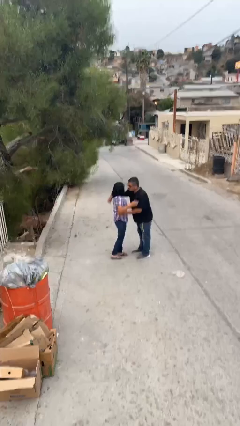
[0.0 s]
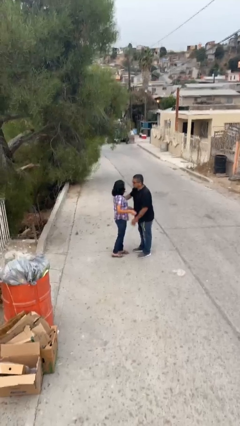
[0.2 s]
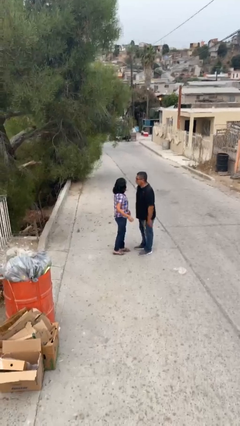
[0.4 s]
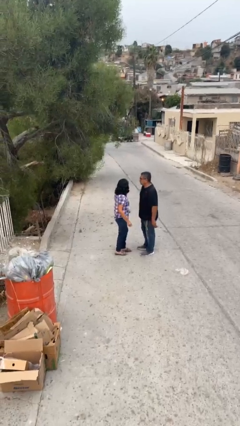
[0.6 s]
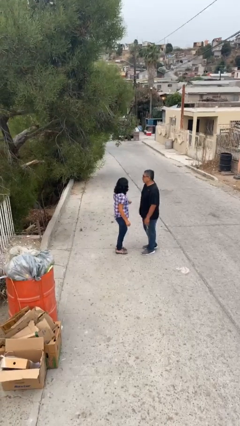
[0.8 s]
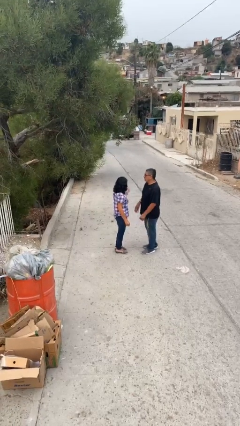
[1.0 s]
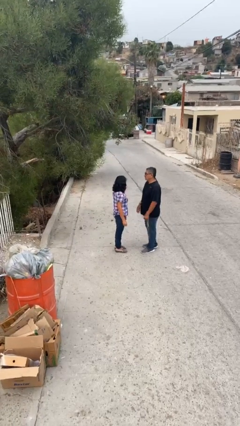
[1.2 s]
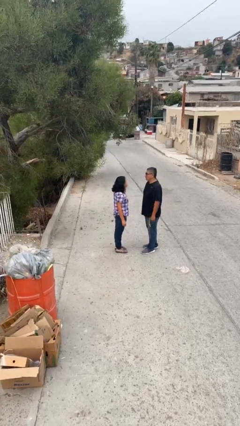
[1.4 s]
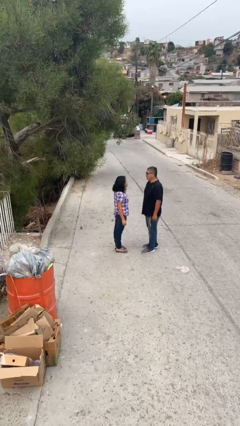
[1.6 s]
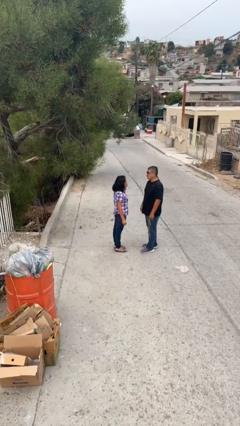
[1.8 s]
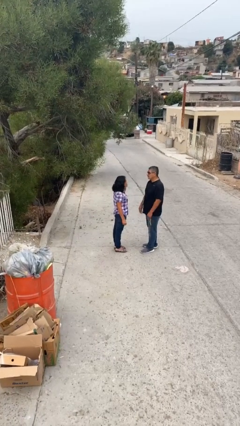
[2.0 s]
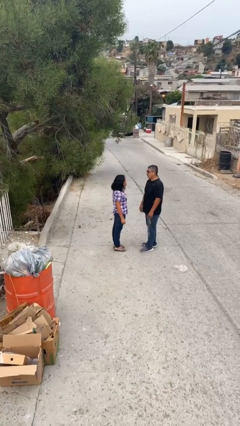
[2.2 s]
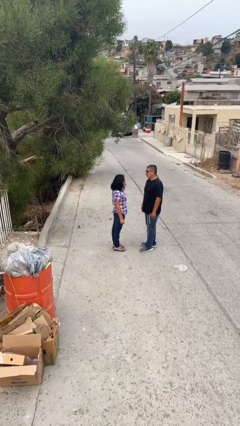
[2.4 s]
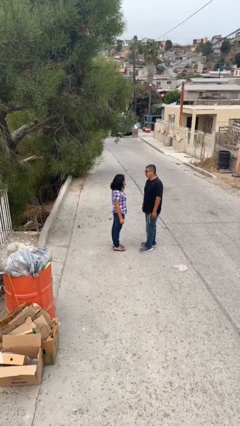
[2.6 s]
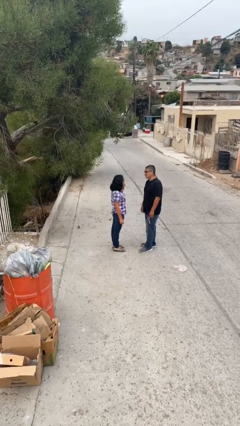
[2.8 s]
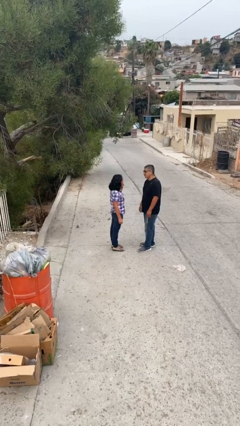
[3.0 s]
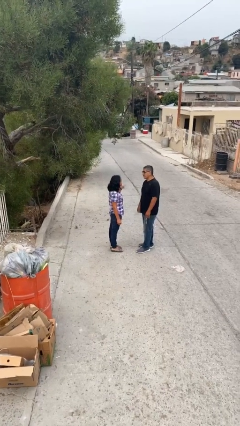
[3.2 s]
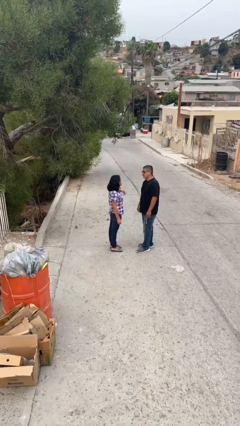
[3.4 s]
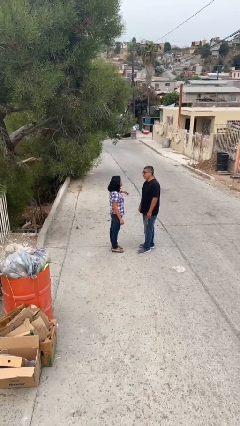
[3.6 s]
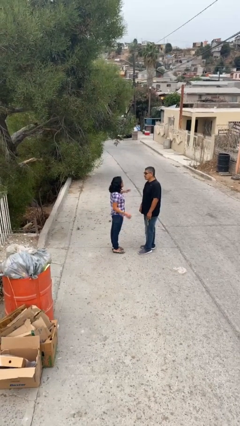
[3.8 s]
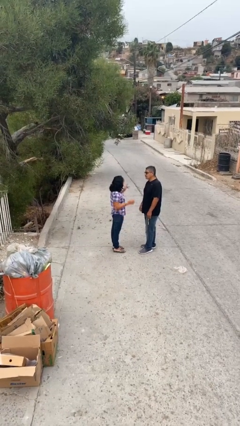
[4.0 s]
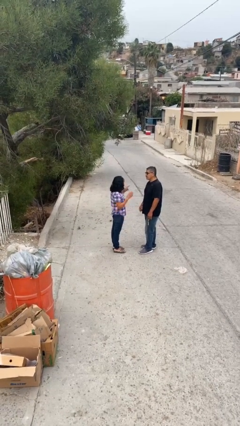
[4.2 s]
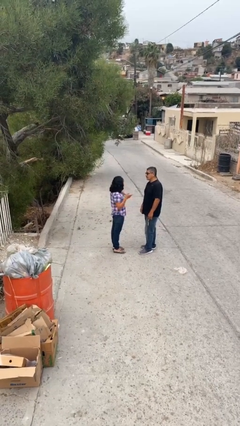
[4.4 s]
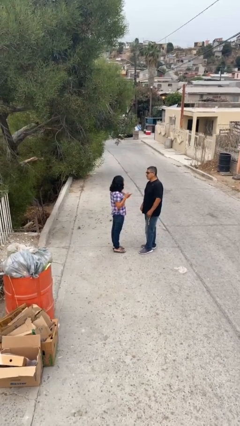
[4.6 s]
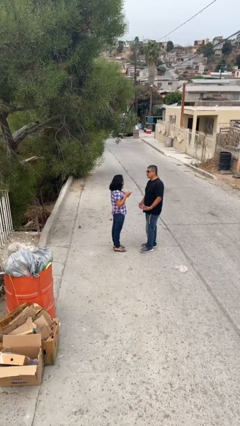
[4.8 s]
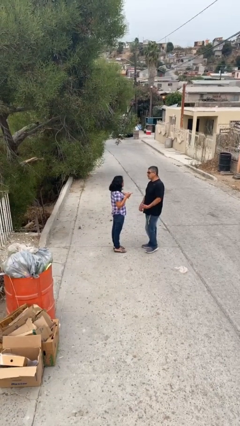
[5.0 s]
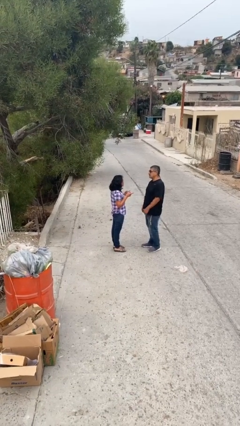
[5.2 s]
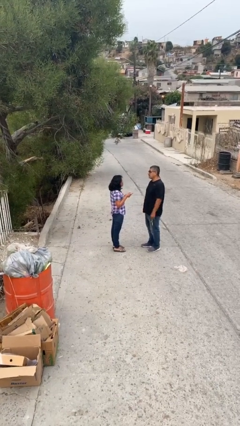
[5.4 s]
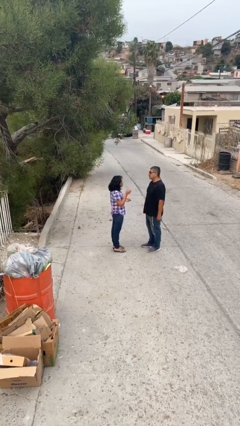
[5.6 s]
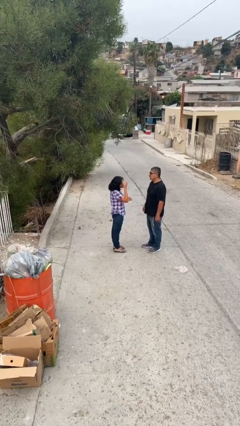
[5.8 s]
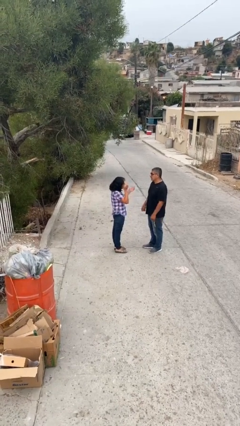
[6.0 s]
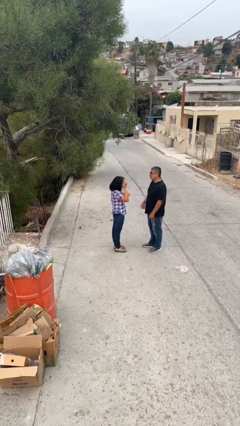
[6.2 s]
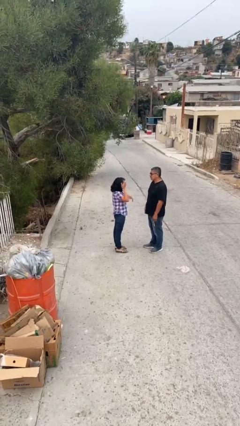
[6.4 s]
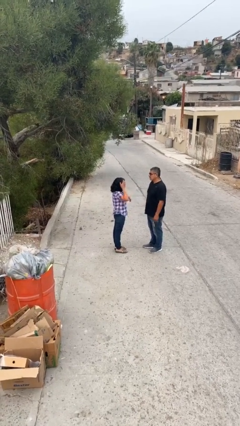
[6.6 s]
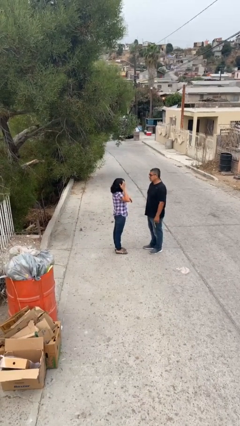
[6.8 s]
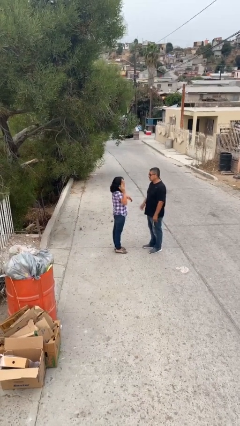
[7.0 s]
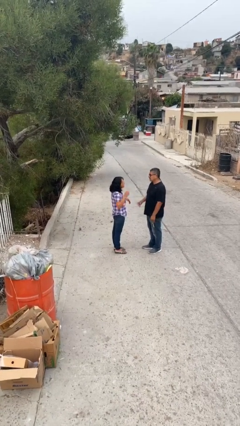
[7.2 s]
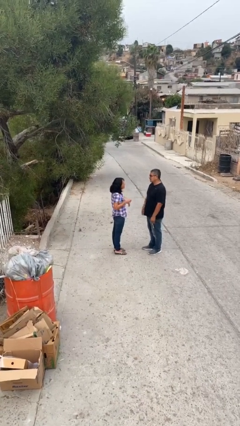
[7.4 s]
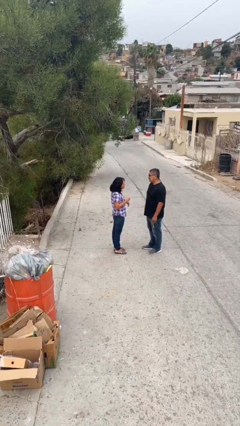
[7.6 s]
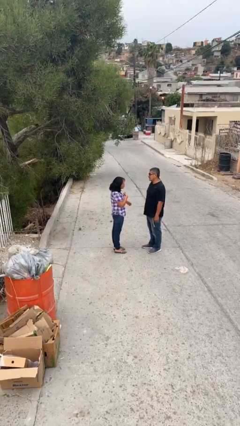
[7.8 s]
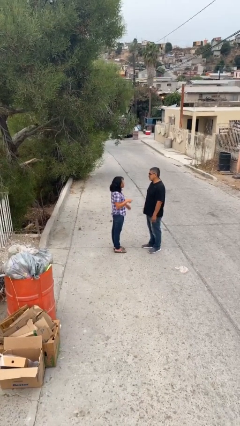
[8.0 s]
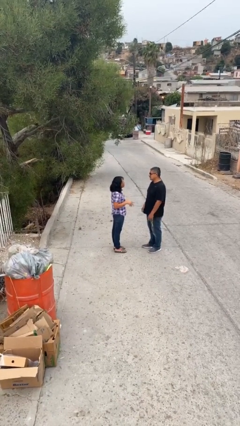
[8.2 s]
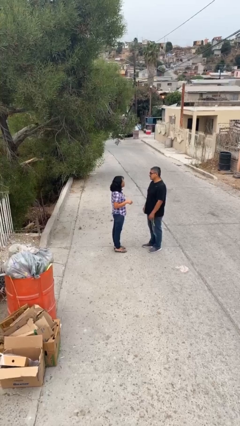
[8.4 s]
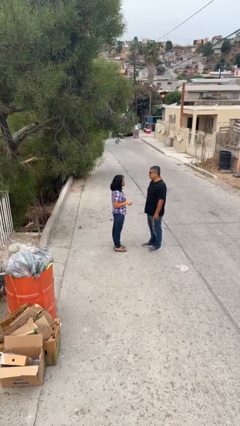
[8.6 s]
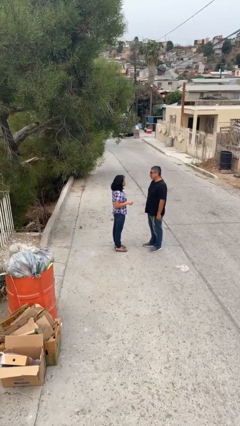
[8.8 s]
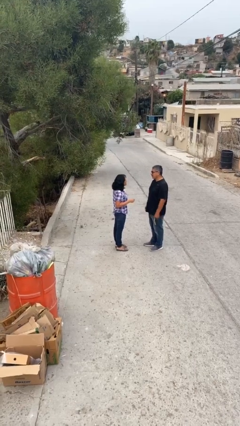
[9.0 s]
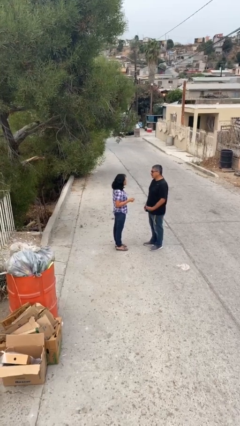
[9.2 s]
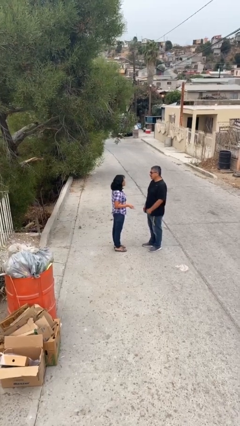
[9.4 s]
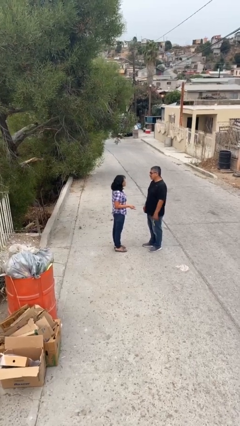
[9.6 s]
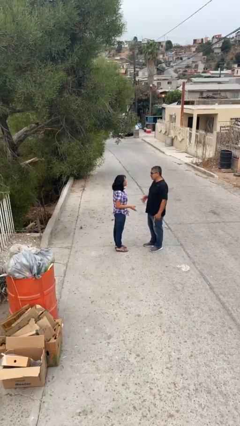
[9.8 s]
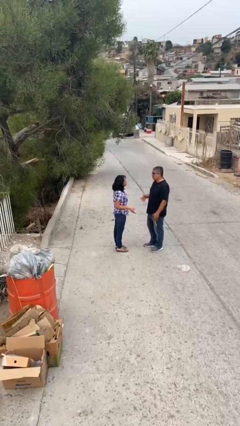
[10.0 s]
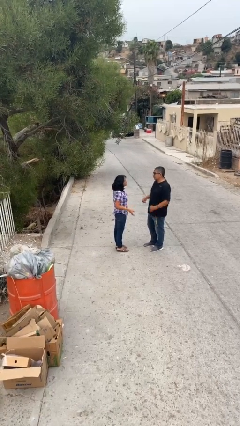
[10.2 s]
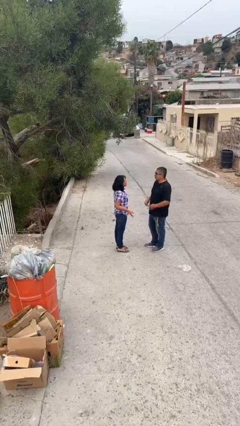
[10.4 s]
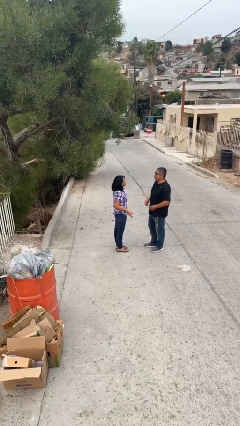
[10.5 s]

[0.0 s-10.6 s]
person talks to person

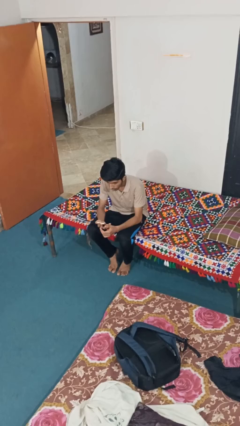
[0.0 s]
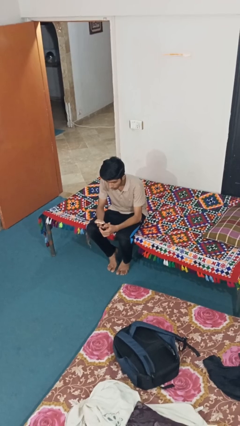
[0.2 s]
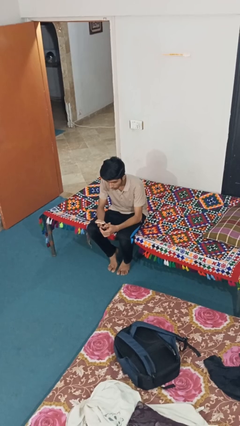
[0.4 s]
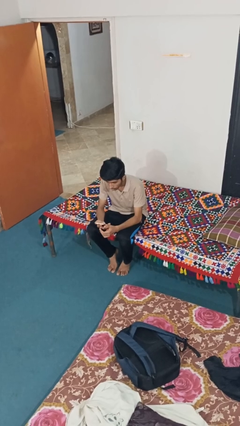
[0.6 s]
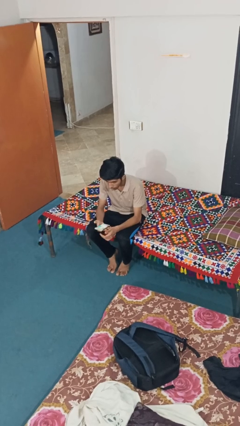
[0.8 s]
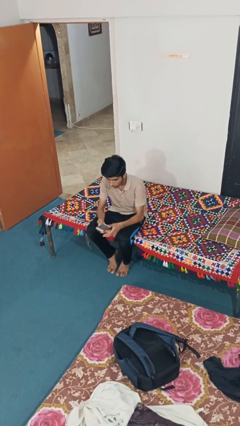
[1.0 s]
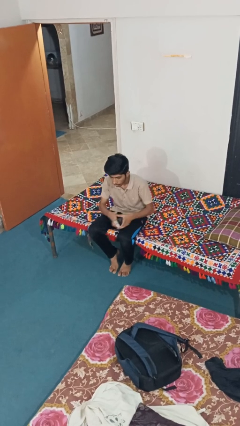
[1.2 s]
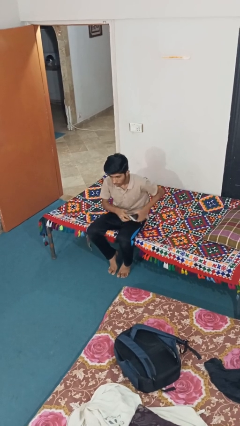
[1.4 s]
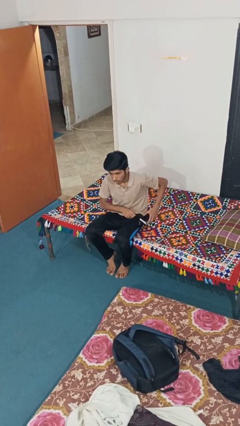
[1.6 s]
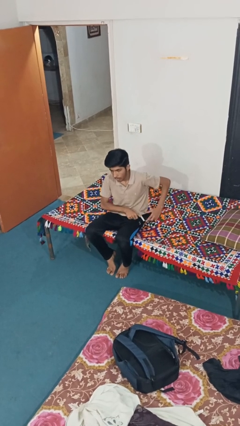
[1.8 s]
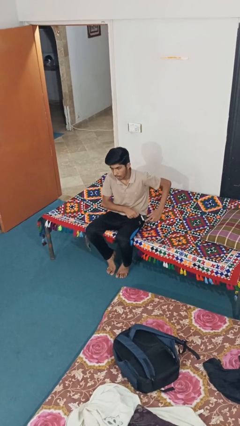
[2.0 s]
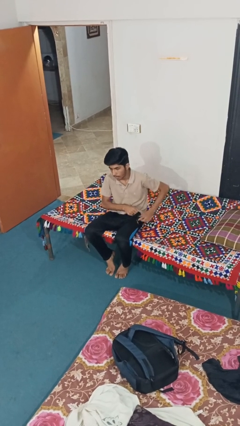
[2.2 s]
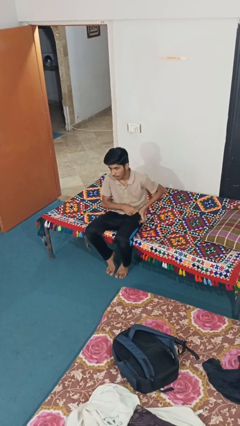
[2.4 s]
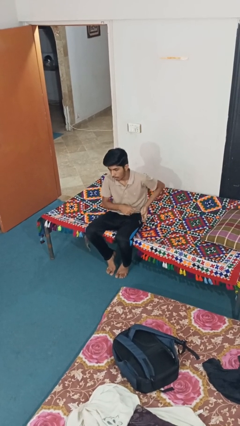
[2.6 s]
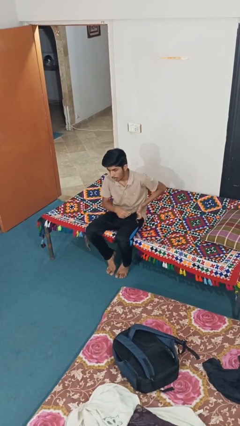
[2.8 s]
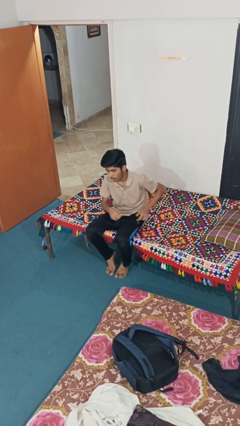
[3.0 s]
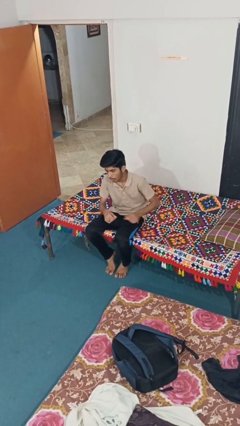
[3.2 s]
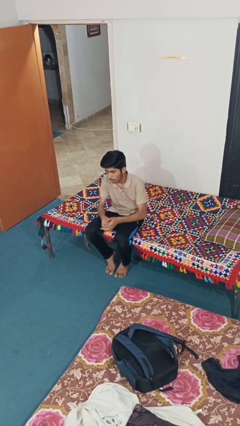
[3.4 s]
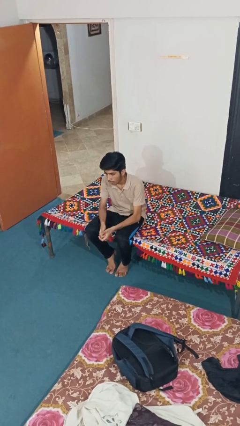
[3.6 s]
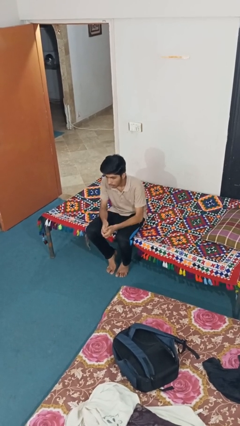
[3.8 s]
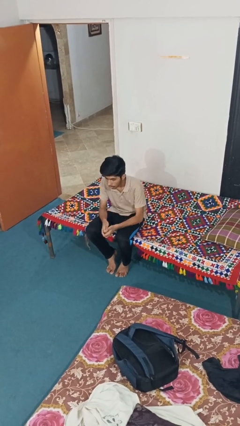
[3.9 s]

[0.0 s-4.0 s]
person puts phone into pocket

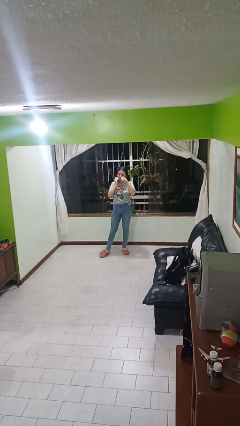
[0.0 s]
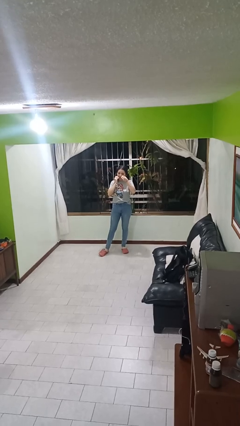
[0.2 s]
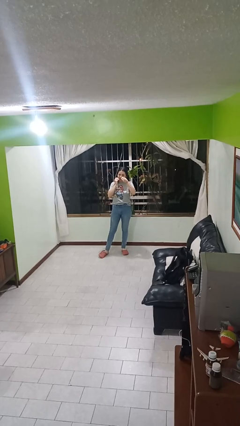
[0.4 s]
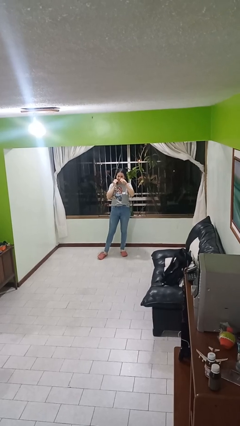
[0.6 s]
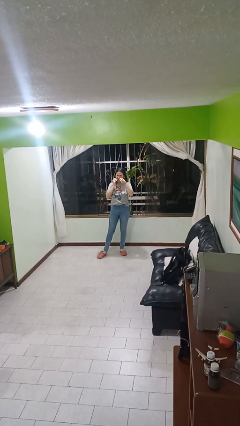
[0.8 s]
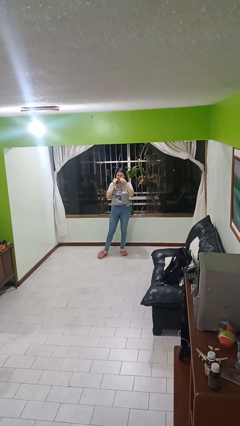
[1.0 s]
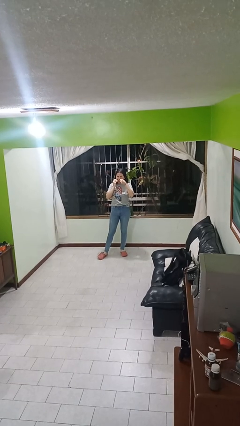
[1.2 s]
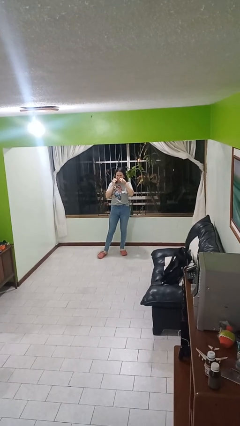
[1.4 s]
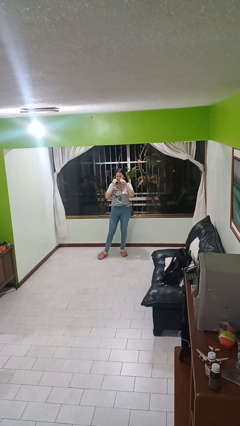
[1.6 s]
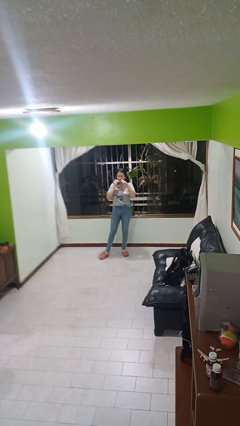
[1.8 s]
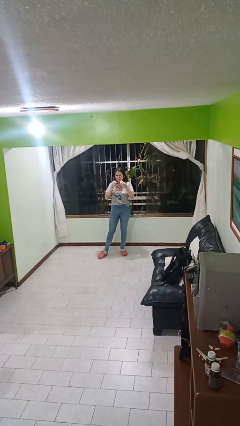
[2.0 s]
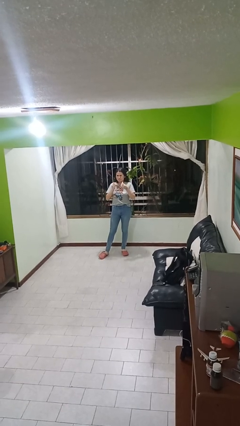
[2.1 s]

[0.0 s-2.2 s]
person flosses

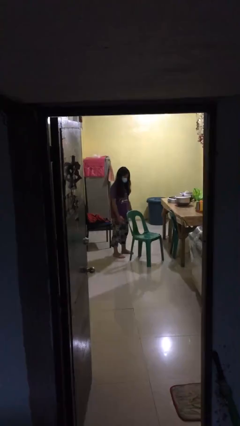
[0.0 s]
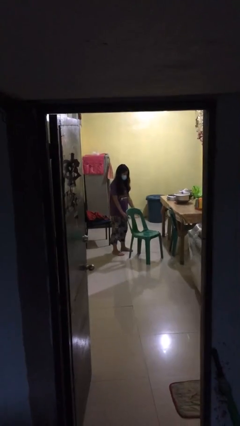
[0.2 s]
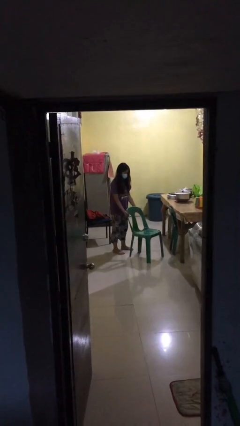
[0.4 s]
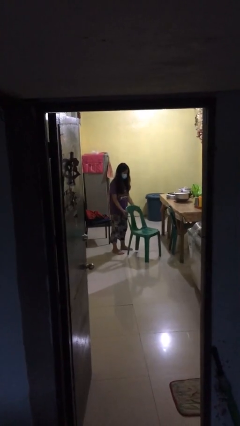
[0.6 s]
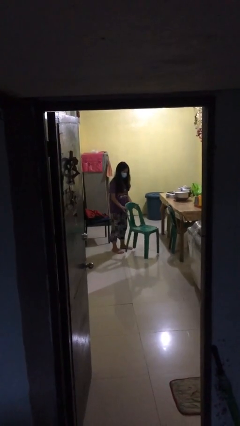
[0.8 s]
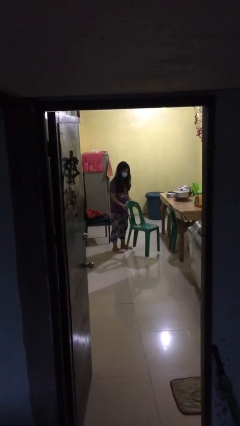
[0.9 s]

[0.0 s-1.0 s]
person picks up object from floor

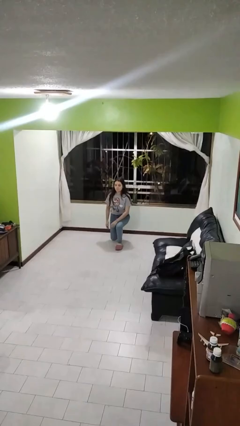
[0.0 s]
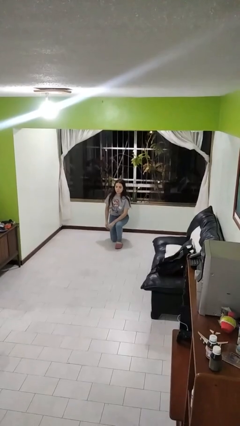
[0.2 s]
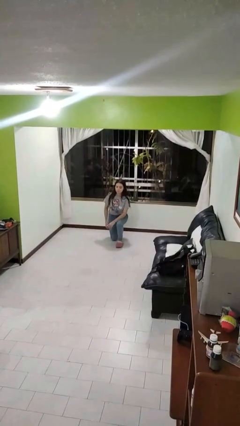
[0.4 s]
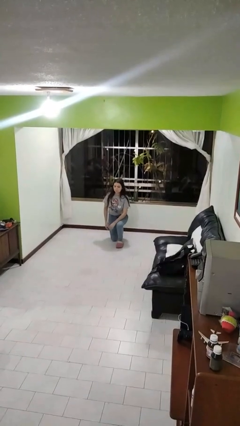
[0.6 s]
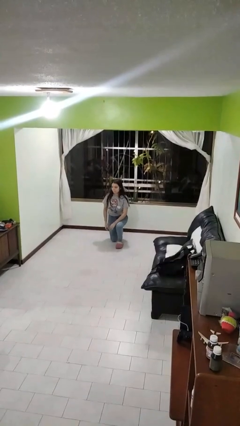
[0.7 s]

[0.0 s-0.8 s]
person kneels
